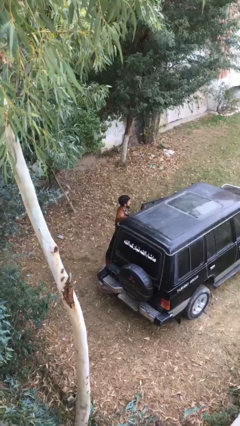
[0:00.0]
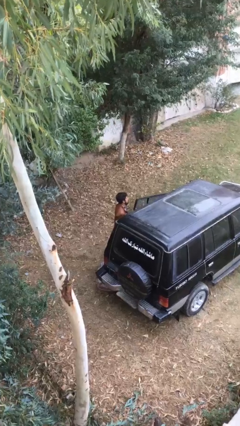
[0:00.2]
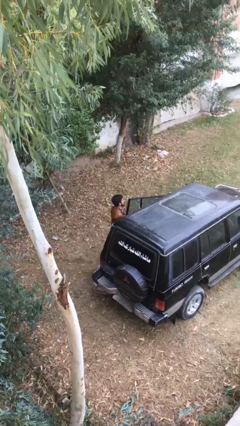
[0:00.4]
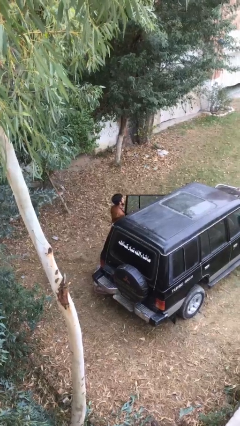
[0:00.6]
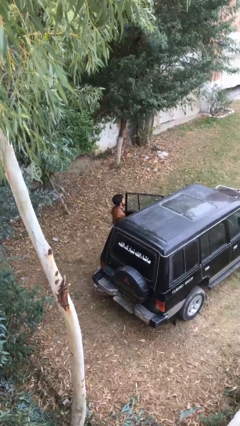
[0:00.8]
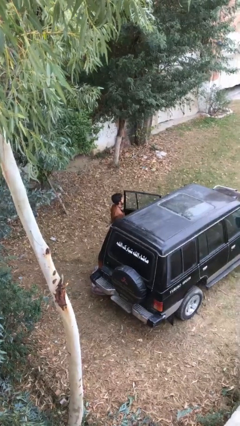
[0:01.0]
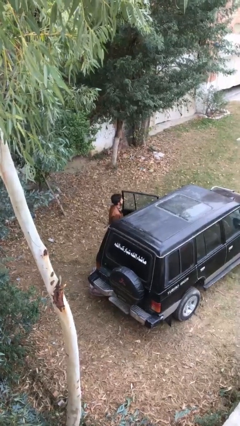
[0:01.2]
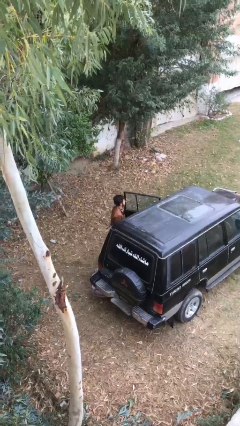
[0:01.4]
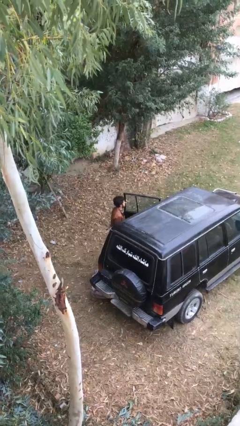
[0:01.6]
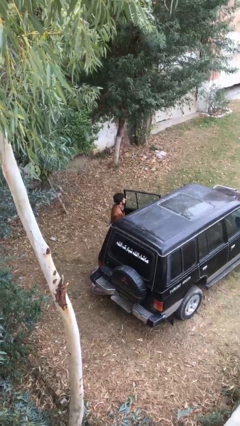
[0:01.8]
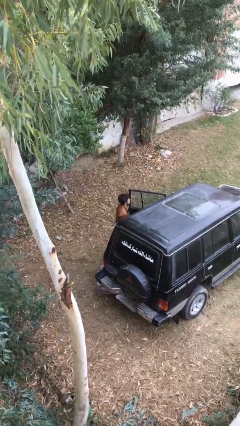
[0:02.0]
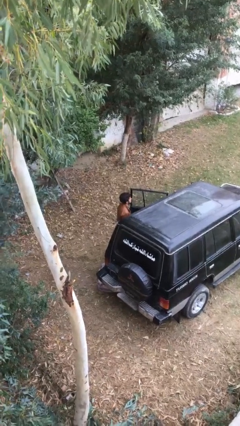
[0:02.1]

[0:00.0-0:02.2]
person opens car door

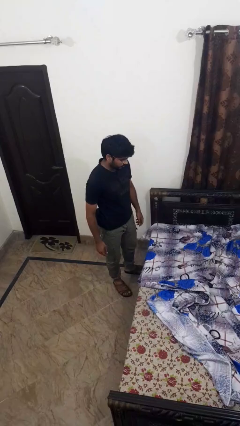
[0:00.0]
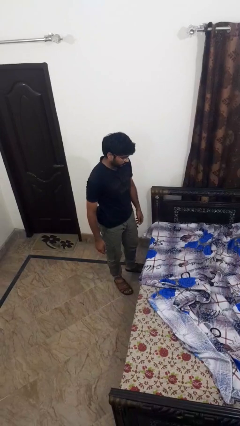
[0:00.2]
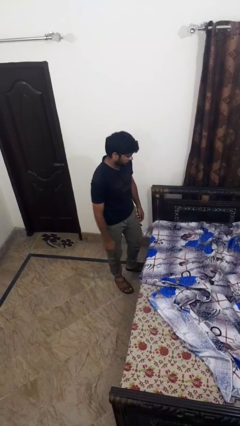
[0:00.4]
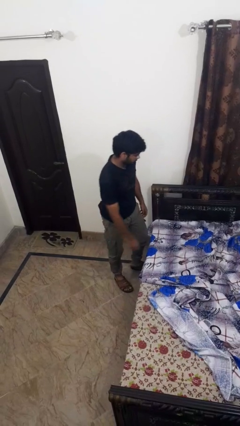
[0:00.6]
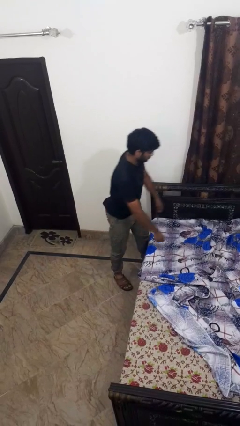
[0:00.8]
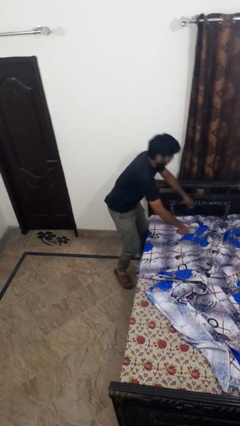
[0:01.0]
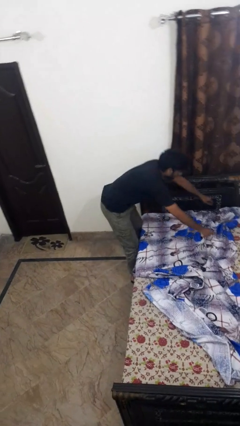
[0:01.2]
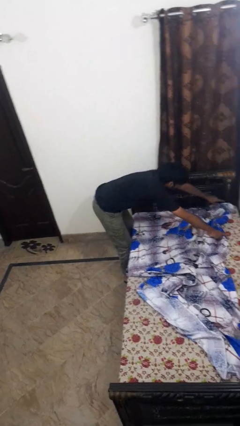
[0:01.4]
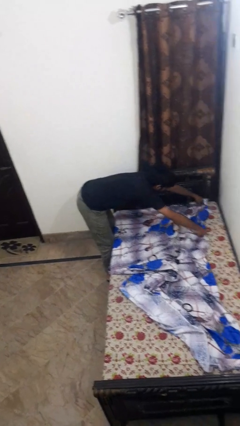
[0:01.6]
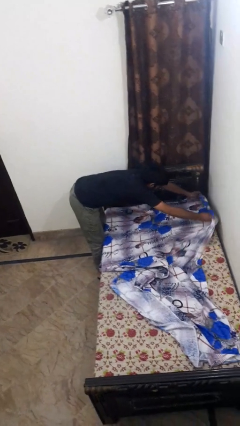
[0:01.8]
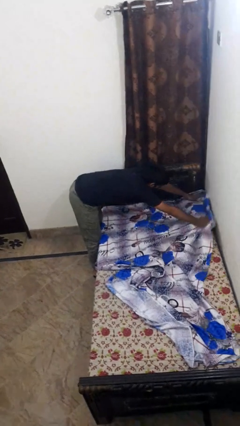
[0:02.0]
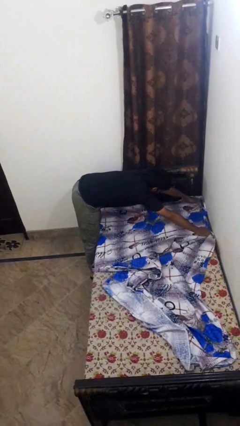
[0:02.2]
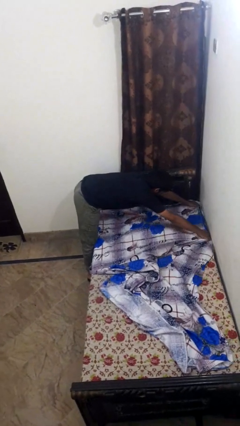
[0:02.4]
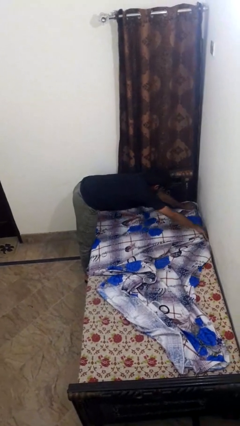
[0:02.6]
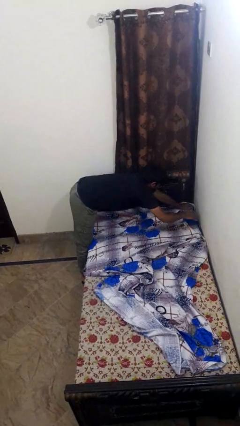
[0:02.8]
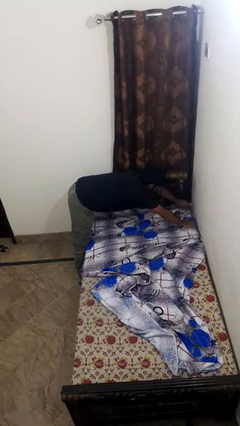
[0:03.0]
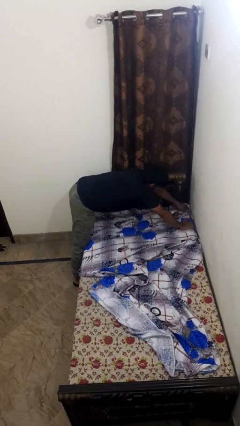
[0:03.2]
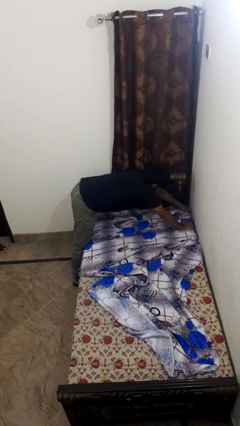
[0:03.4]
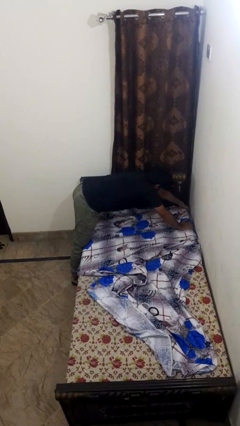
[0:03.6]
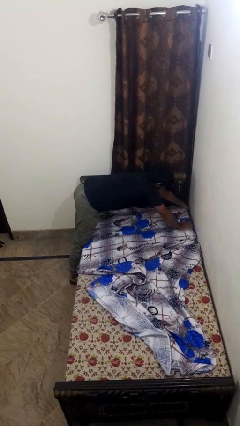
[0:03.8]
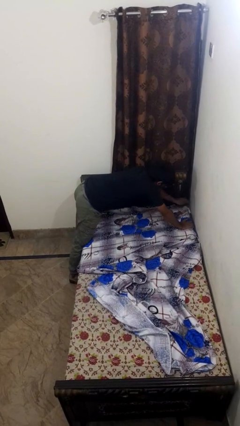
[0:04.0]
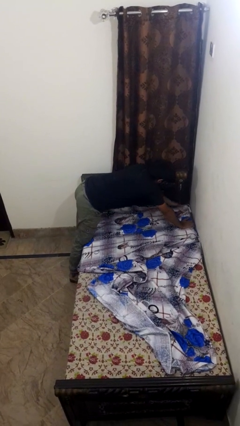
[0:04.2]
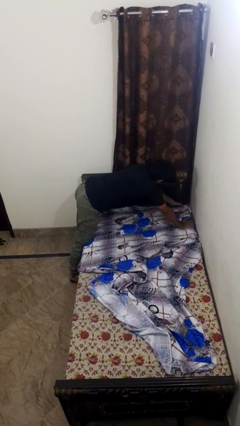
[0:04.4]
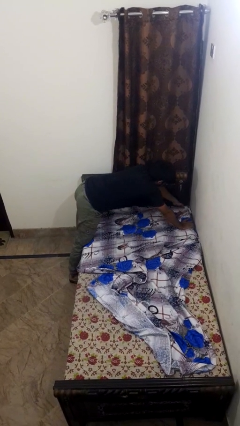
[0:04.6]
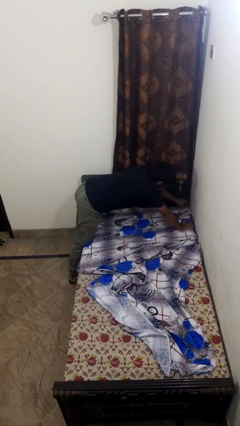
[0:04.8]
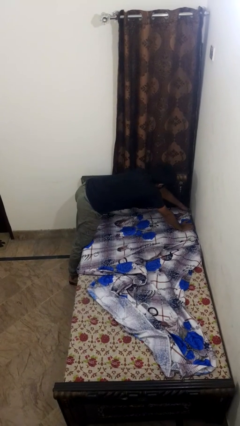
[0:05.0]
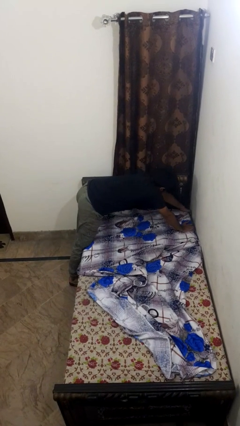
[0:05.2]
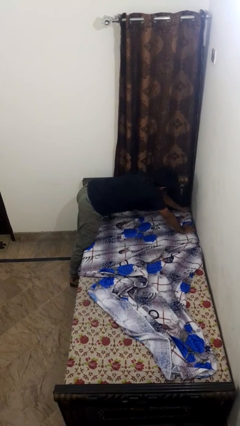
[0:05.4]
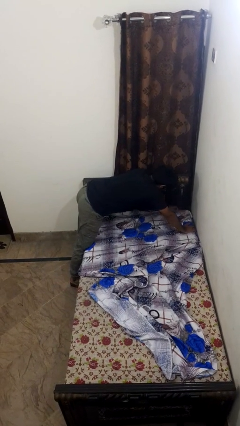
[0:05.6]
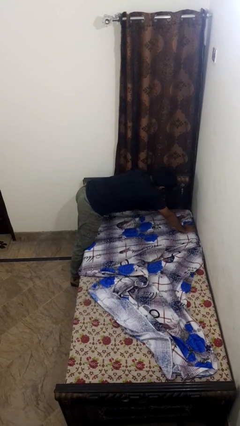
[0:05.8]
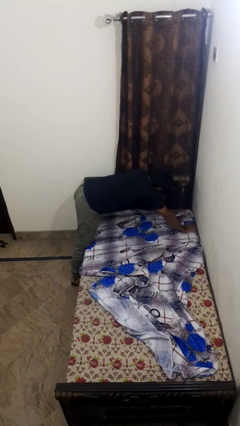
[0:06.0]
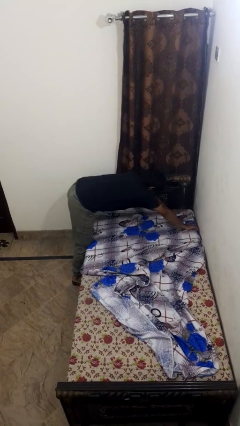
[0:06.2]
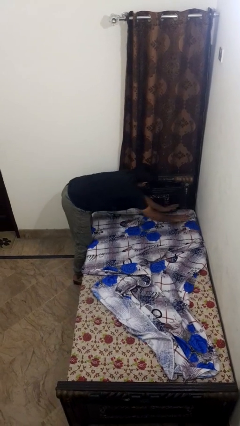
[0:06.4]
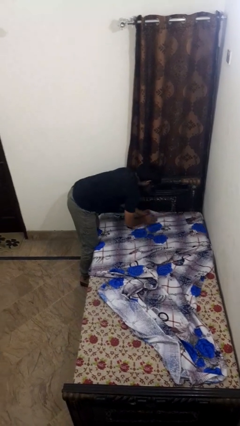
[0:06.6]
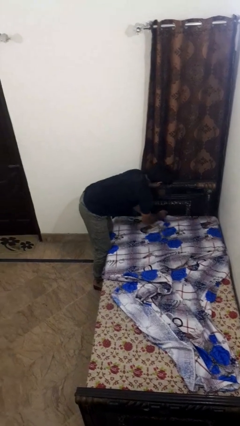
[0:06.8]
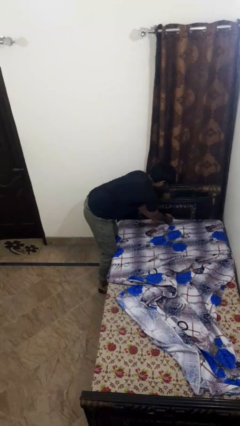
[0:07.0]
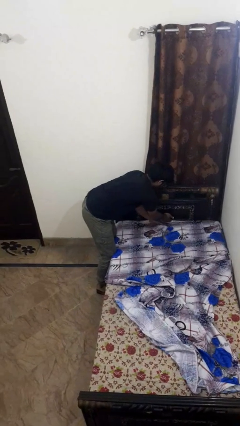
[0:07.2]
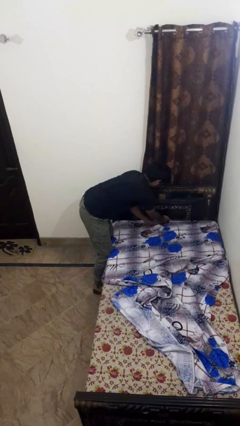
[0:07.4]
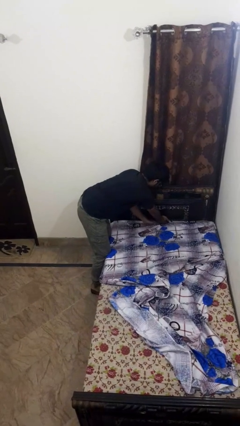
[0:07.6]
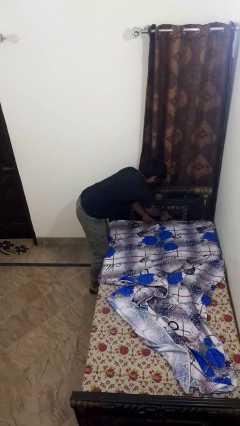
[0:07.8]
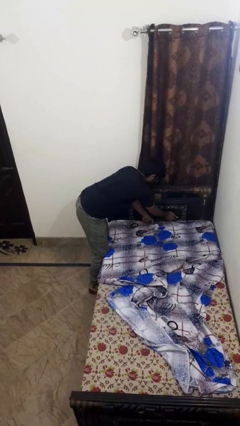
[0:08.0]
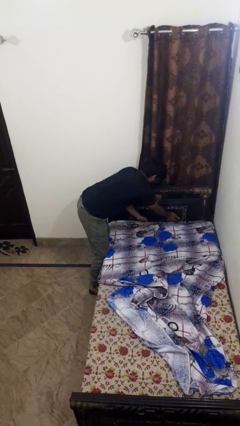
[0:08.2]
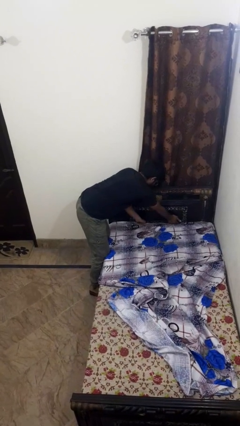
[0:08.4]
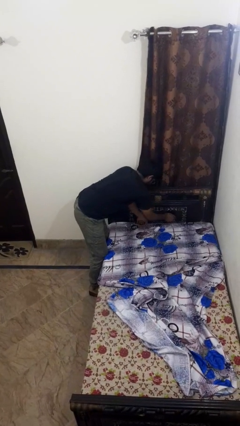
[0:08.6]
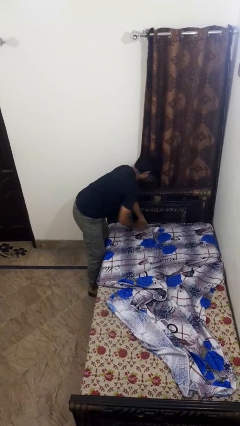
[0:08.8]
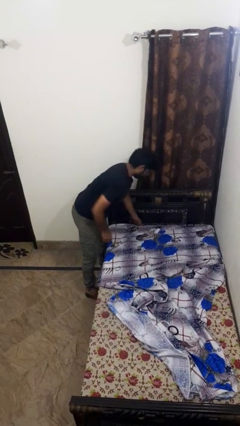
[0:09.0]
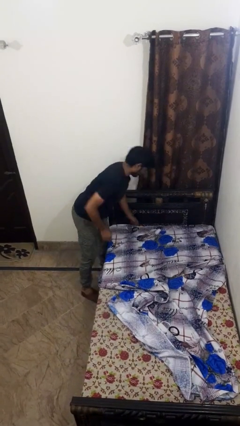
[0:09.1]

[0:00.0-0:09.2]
person makes bed

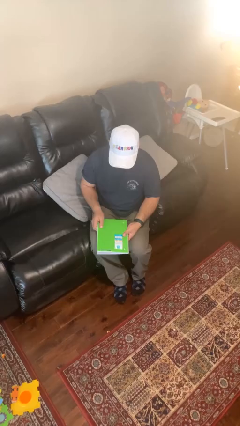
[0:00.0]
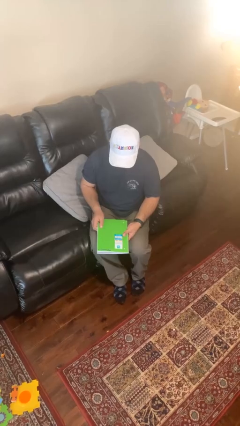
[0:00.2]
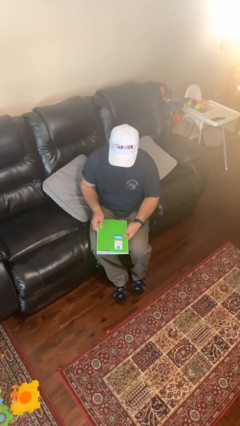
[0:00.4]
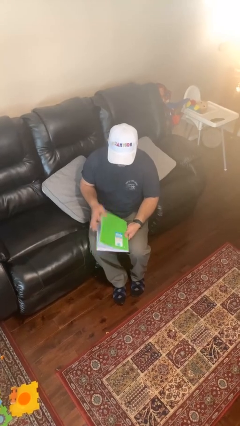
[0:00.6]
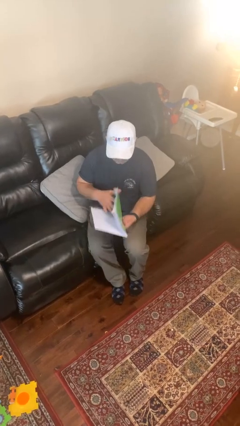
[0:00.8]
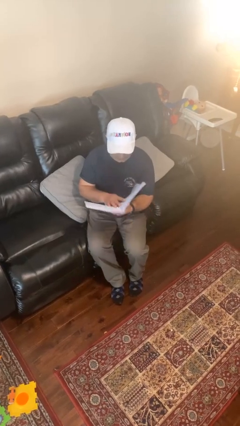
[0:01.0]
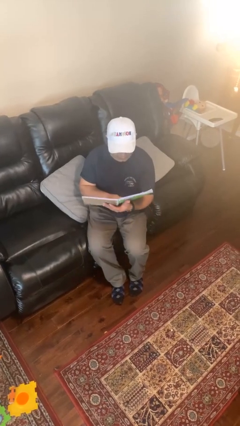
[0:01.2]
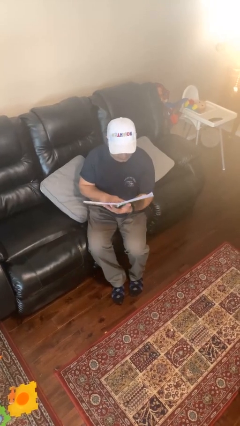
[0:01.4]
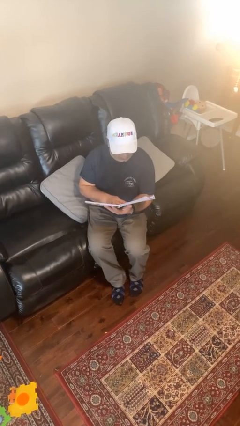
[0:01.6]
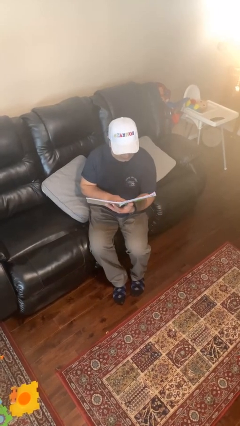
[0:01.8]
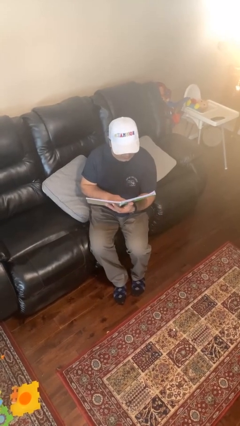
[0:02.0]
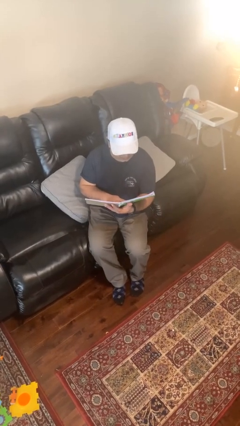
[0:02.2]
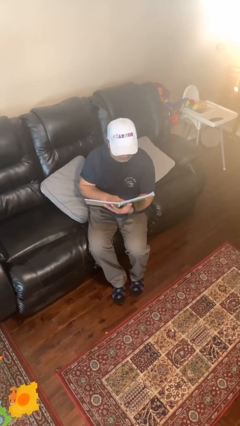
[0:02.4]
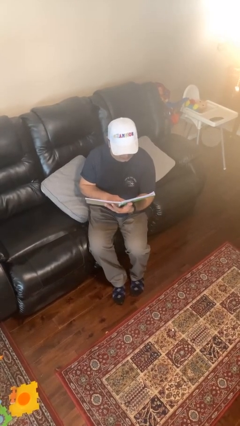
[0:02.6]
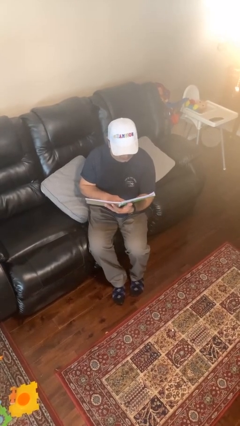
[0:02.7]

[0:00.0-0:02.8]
person reads document

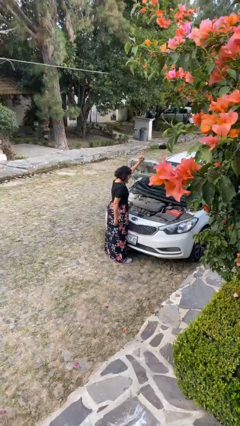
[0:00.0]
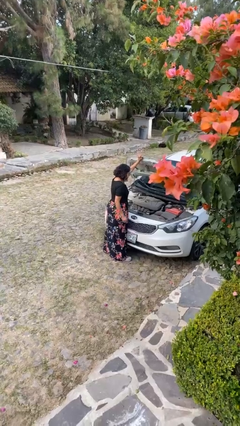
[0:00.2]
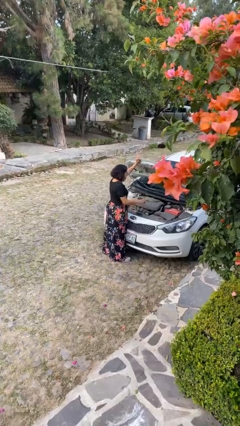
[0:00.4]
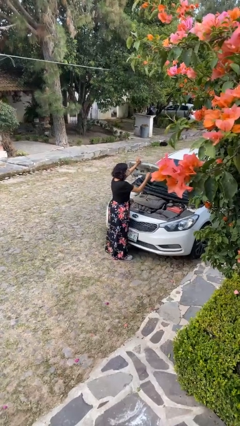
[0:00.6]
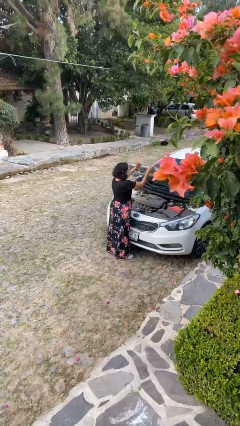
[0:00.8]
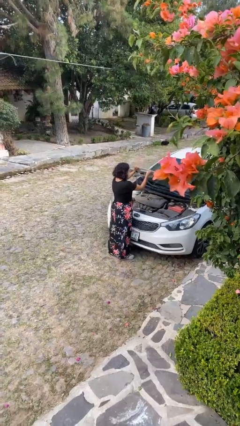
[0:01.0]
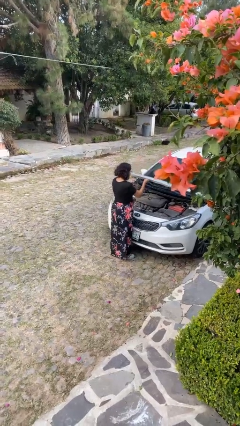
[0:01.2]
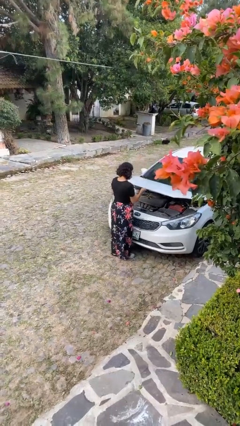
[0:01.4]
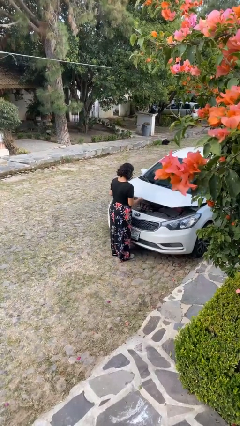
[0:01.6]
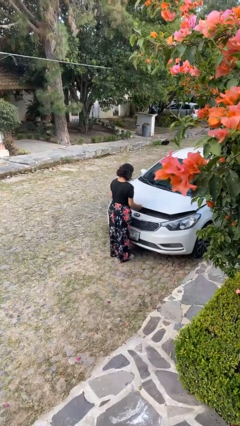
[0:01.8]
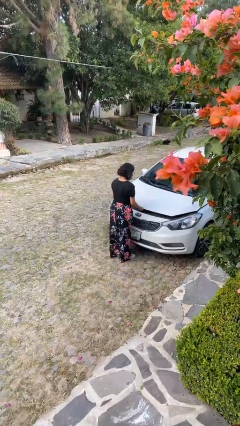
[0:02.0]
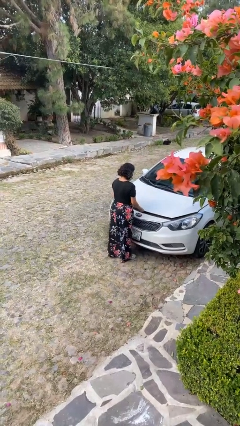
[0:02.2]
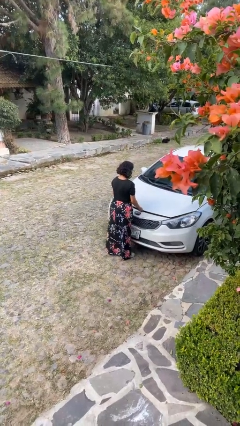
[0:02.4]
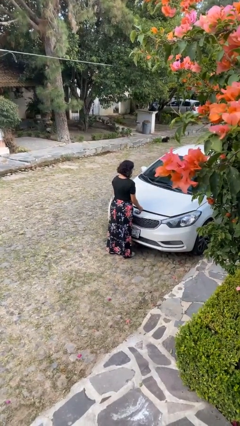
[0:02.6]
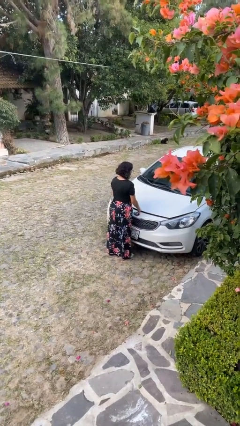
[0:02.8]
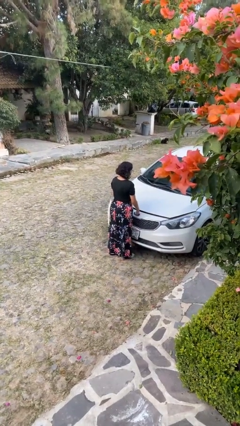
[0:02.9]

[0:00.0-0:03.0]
person closes car hood

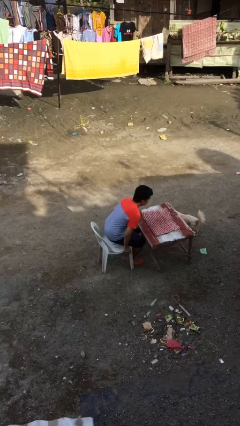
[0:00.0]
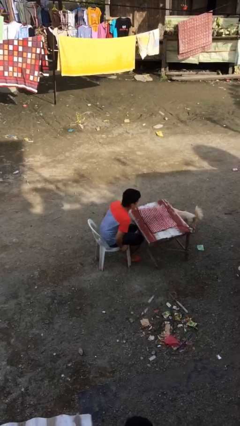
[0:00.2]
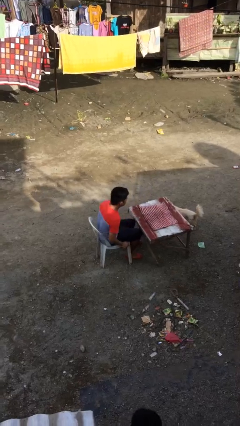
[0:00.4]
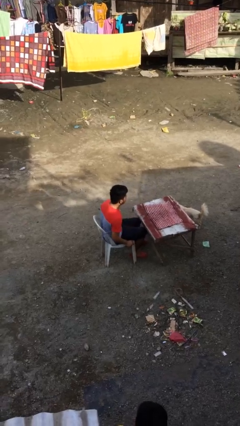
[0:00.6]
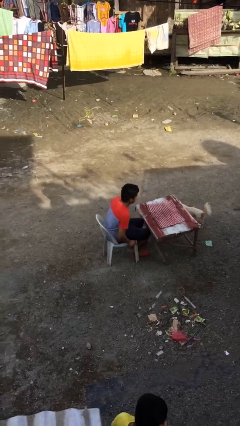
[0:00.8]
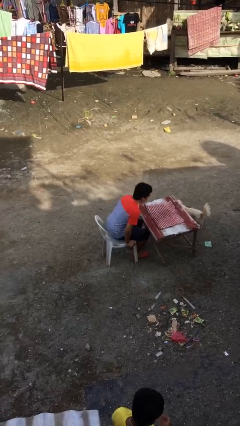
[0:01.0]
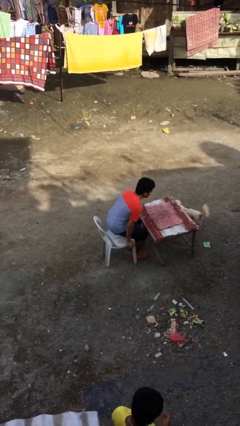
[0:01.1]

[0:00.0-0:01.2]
person sits down
